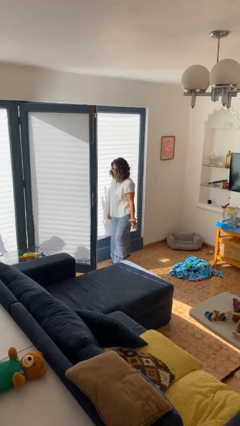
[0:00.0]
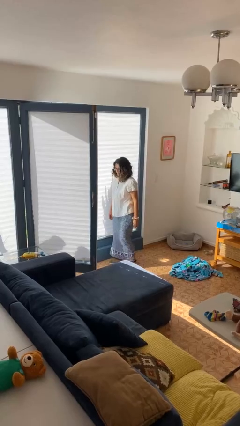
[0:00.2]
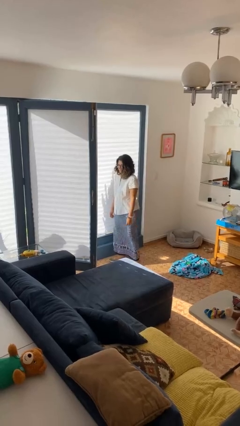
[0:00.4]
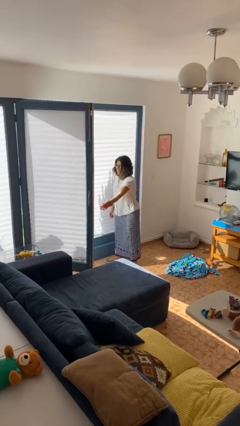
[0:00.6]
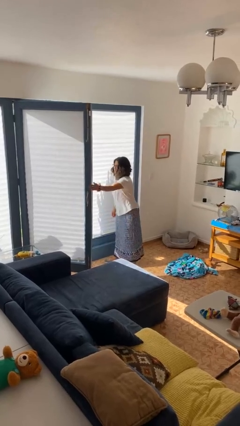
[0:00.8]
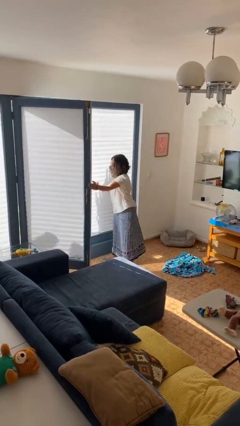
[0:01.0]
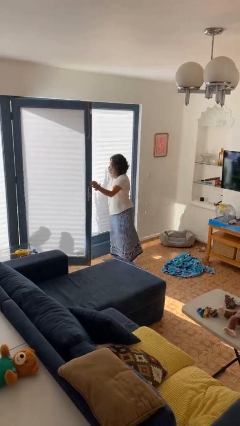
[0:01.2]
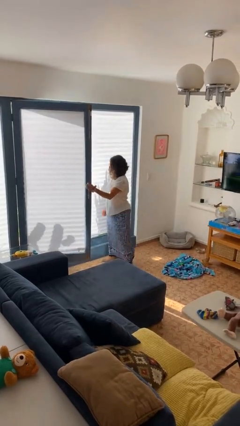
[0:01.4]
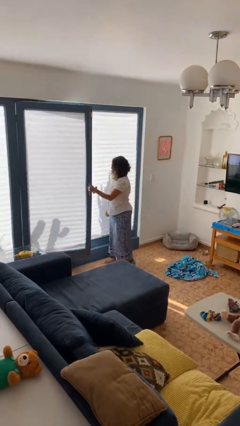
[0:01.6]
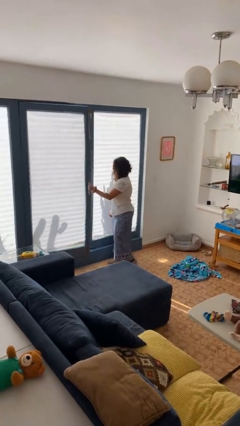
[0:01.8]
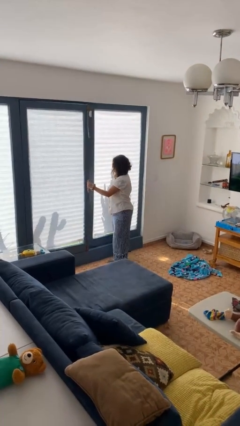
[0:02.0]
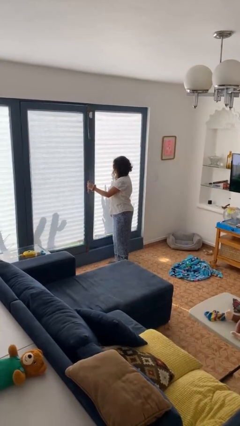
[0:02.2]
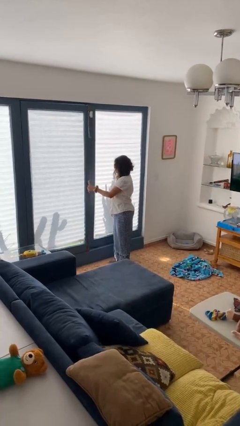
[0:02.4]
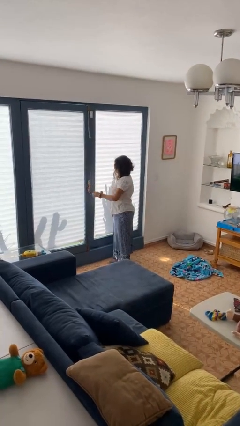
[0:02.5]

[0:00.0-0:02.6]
person closes home window

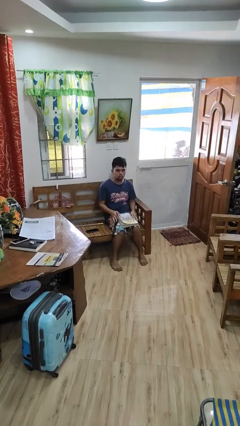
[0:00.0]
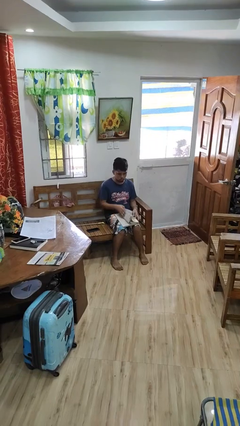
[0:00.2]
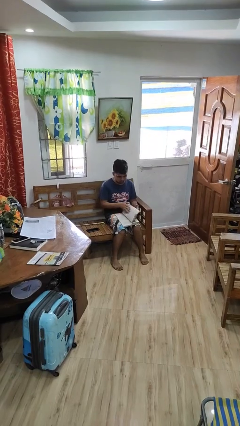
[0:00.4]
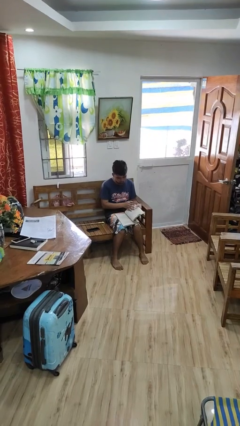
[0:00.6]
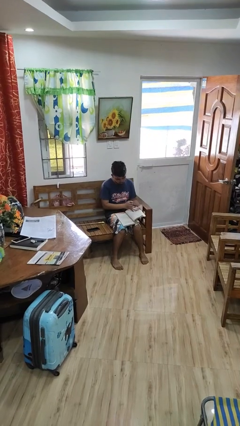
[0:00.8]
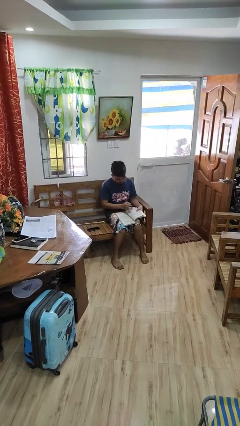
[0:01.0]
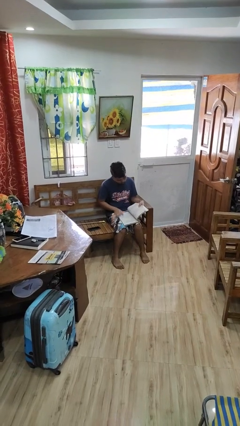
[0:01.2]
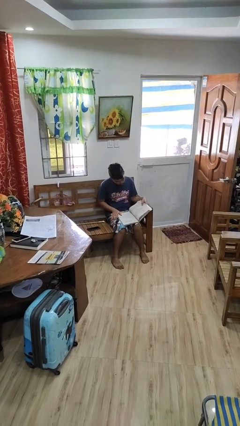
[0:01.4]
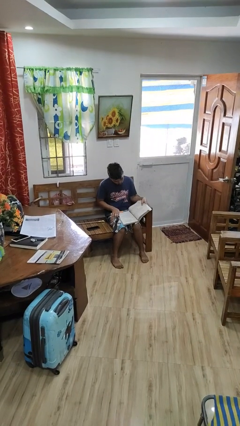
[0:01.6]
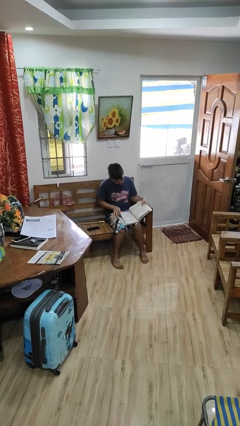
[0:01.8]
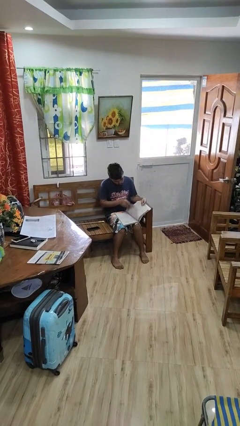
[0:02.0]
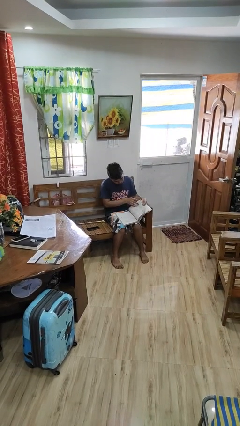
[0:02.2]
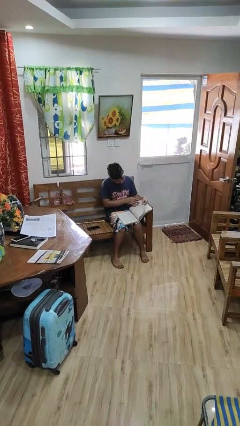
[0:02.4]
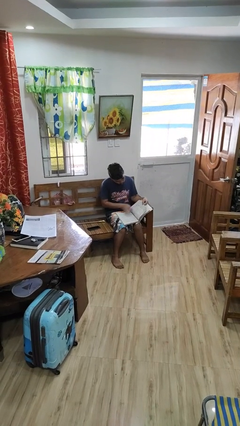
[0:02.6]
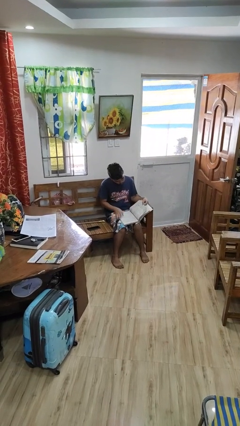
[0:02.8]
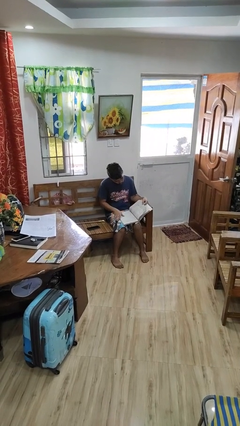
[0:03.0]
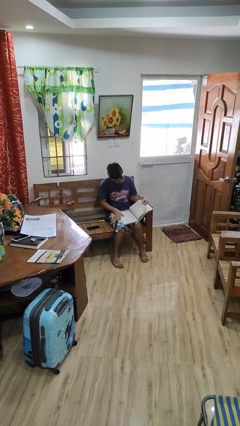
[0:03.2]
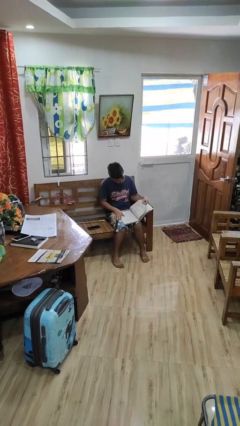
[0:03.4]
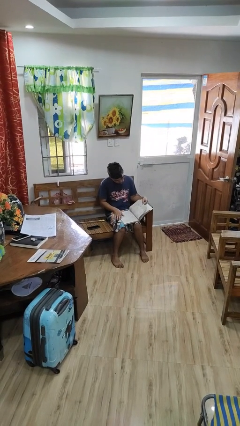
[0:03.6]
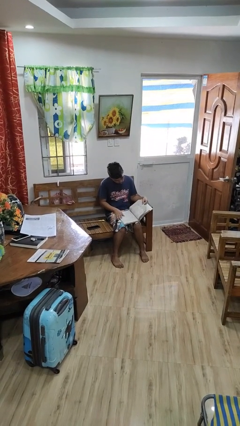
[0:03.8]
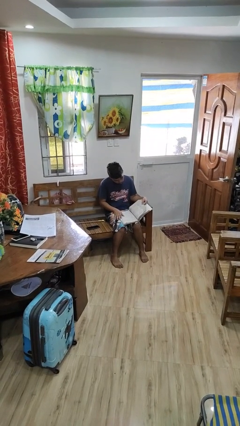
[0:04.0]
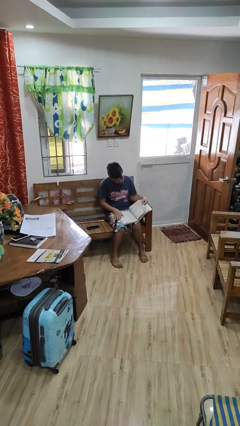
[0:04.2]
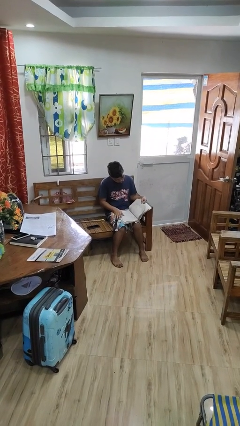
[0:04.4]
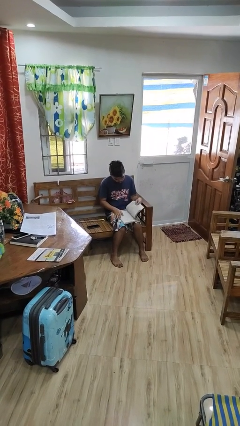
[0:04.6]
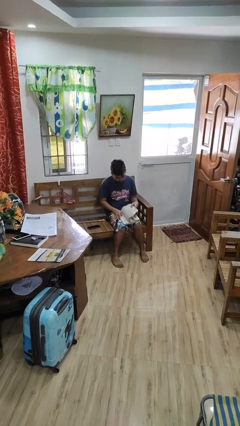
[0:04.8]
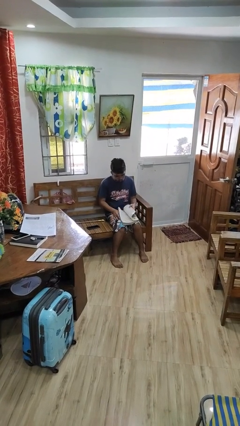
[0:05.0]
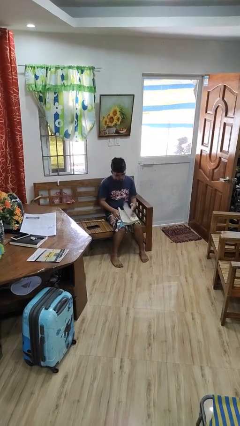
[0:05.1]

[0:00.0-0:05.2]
person reads book

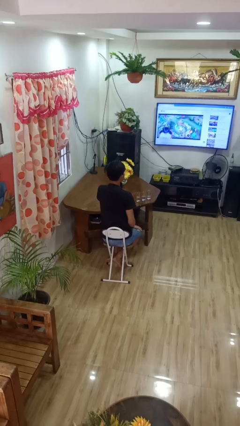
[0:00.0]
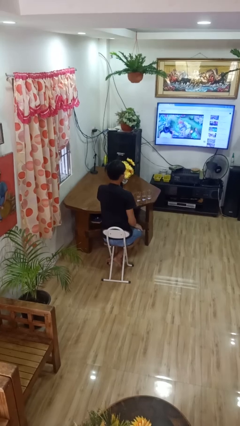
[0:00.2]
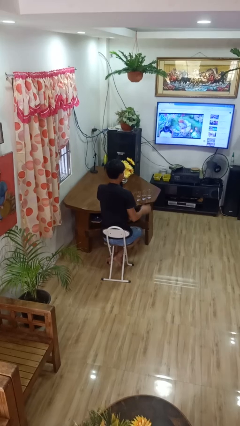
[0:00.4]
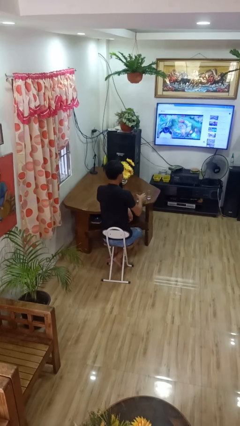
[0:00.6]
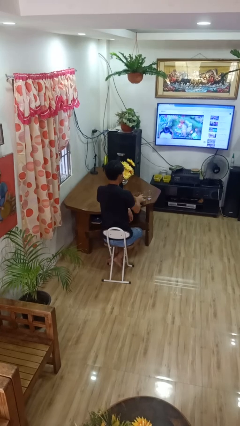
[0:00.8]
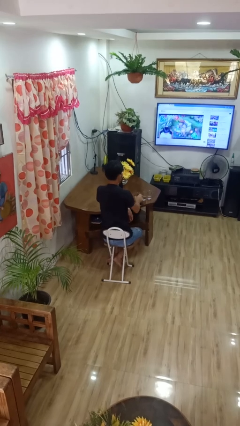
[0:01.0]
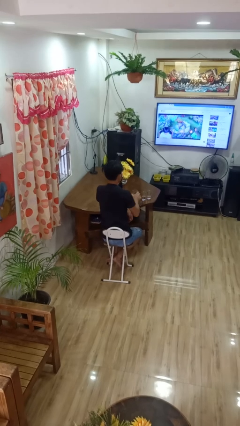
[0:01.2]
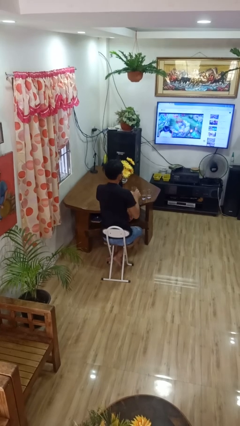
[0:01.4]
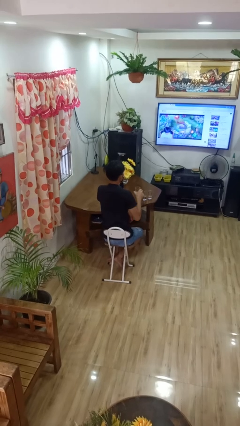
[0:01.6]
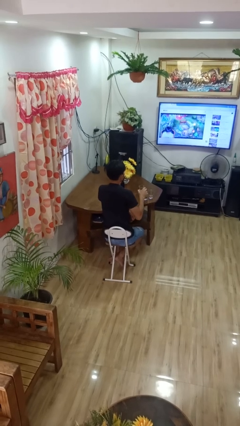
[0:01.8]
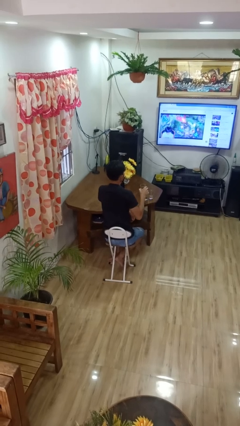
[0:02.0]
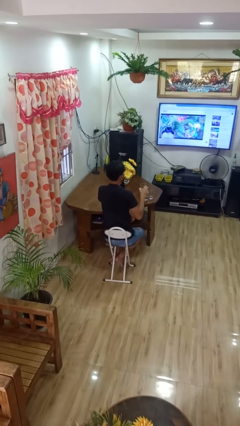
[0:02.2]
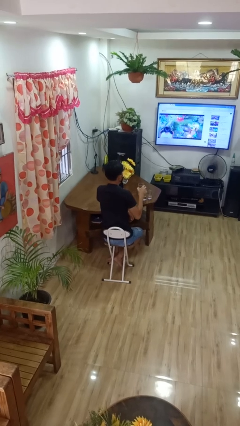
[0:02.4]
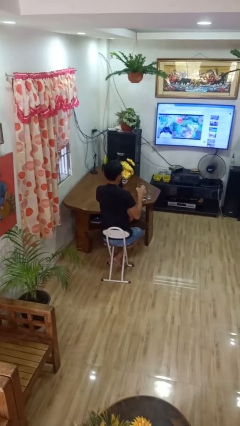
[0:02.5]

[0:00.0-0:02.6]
person picks up object from table

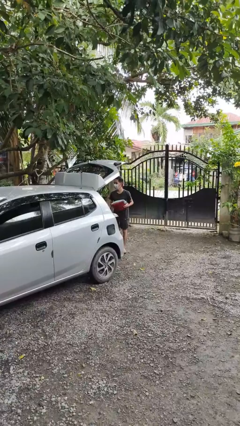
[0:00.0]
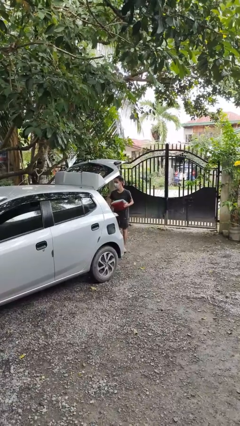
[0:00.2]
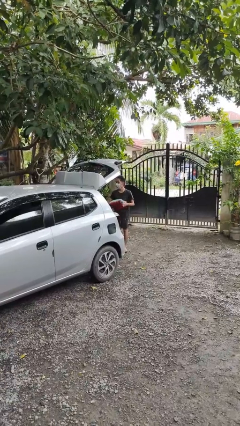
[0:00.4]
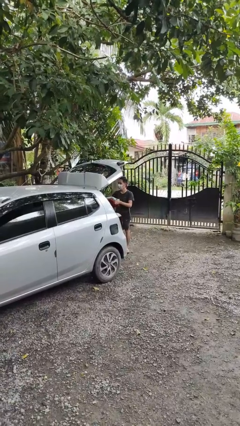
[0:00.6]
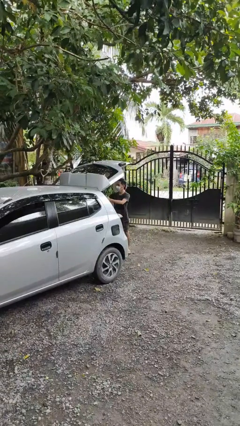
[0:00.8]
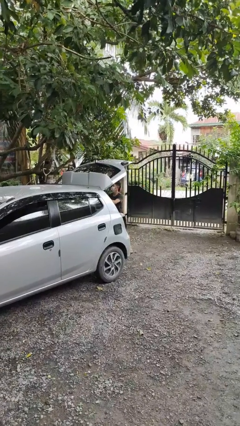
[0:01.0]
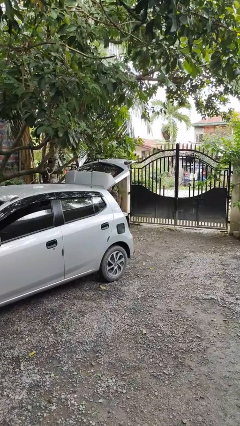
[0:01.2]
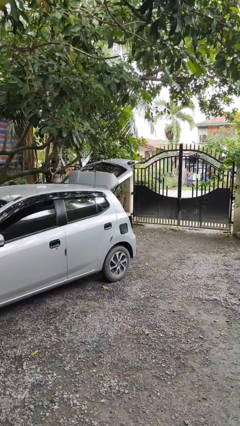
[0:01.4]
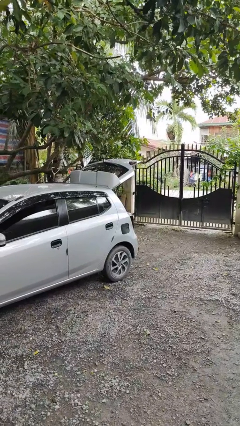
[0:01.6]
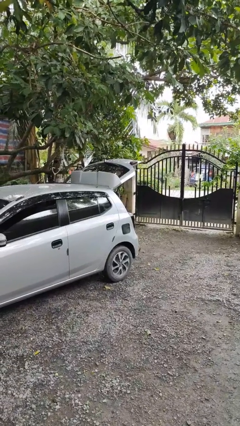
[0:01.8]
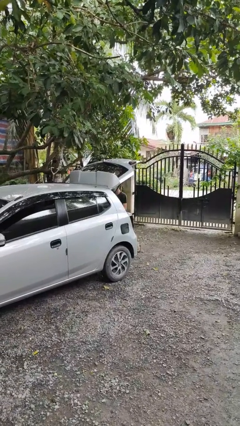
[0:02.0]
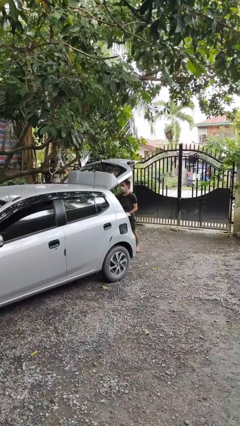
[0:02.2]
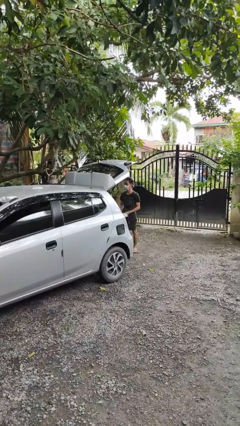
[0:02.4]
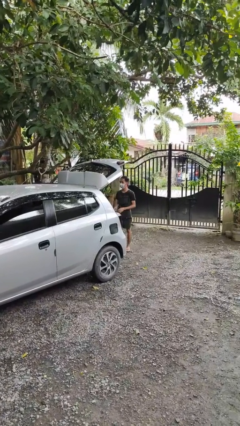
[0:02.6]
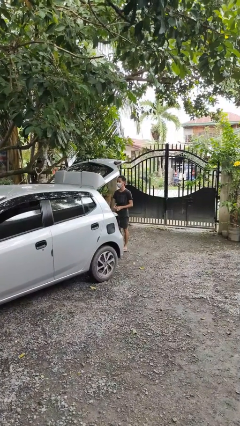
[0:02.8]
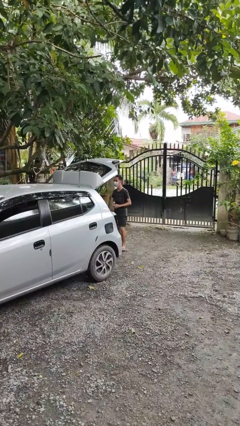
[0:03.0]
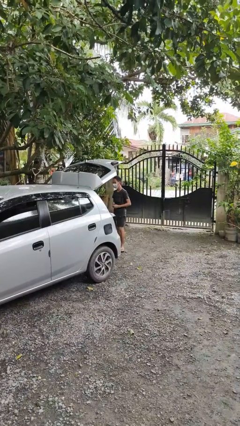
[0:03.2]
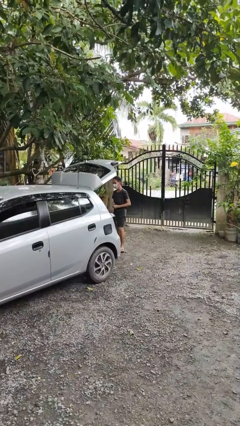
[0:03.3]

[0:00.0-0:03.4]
person loads car

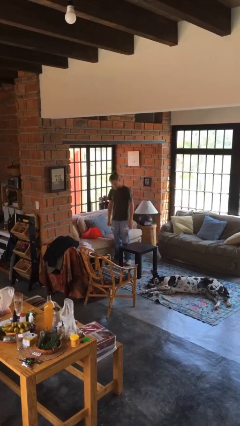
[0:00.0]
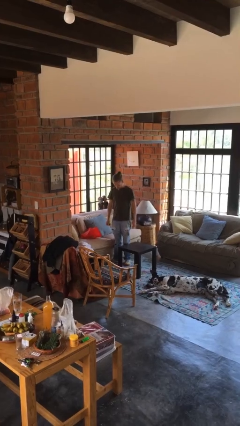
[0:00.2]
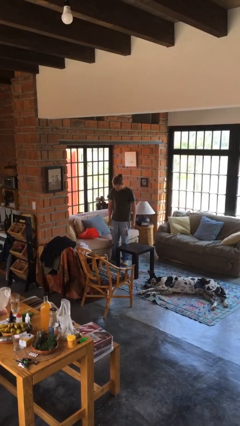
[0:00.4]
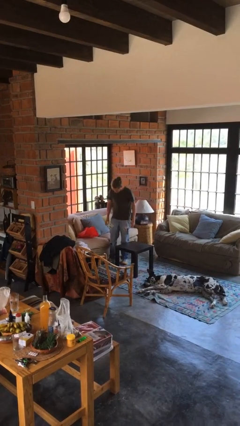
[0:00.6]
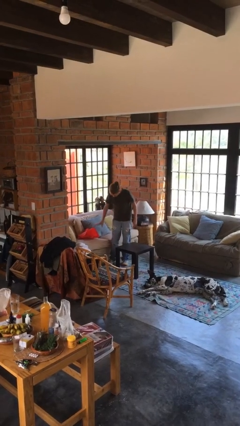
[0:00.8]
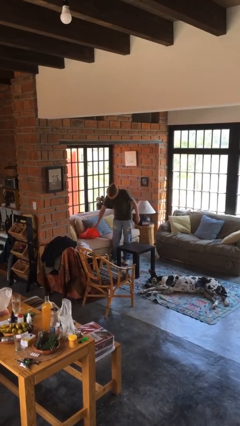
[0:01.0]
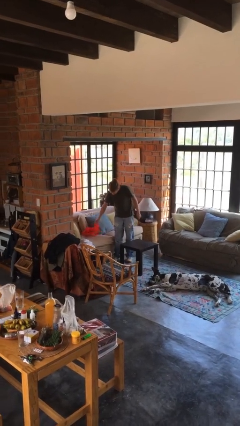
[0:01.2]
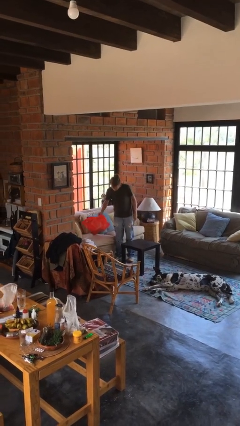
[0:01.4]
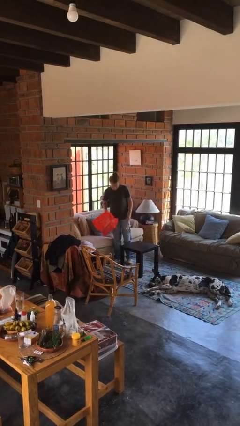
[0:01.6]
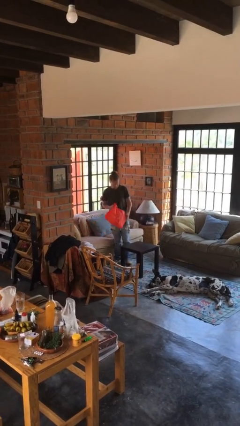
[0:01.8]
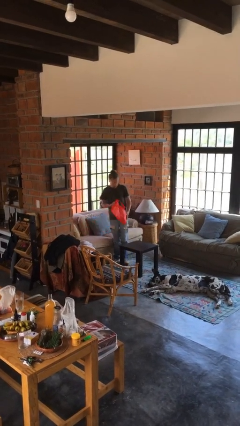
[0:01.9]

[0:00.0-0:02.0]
person picks up object from couch

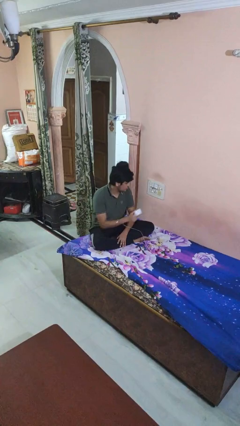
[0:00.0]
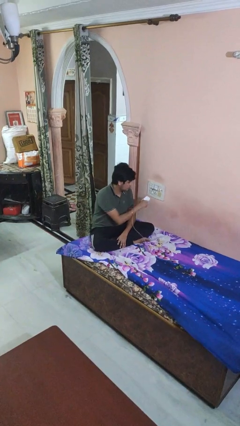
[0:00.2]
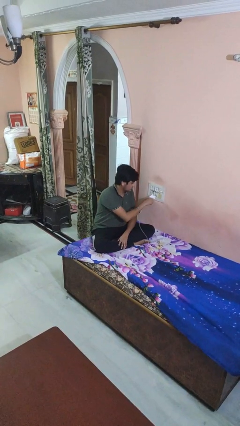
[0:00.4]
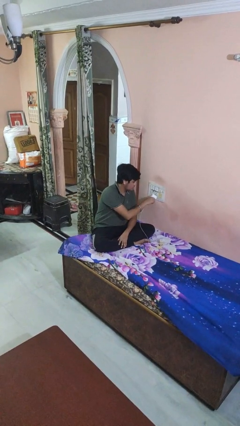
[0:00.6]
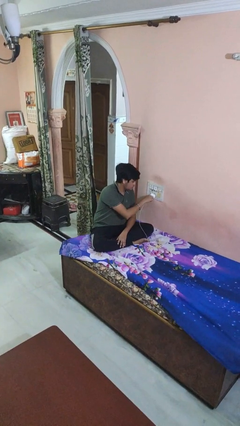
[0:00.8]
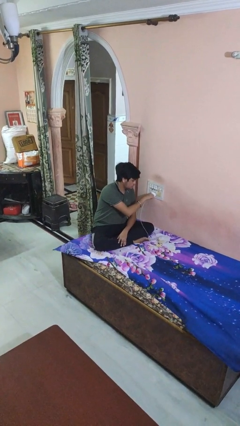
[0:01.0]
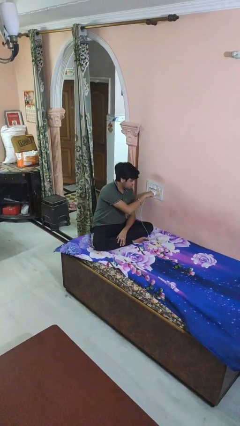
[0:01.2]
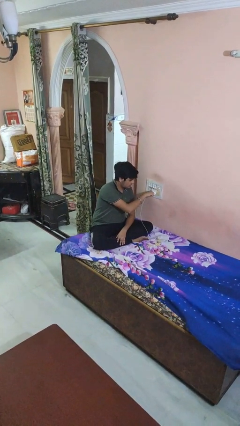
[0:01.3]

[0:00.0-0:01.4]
person plugs into electrical socket

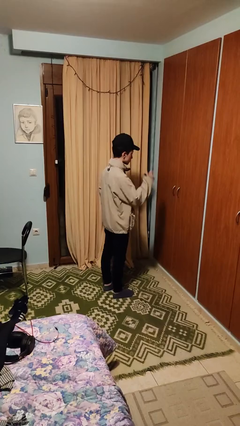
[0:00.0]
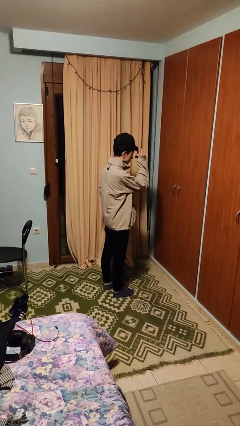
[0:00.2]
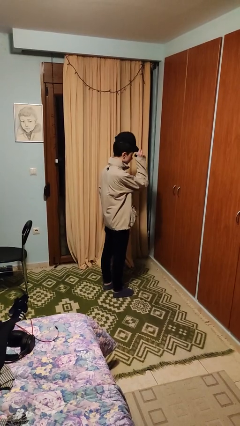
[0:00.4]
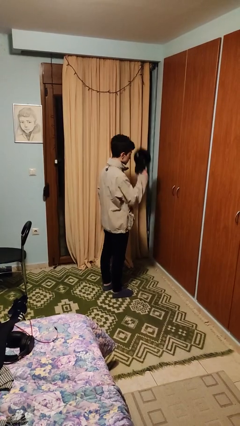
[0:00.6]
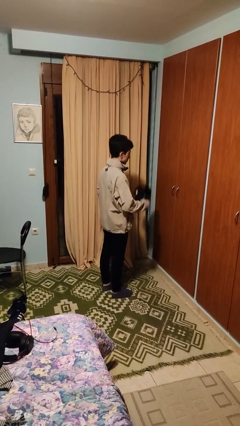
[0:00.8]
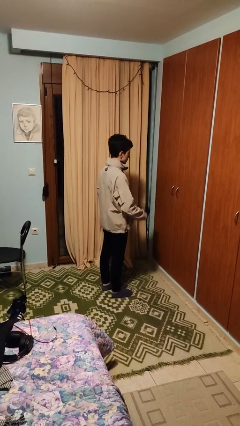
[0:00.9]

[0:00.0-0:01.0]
person takes off hat
